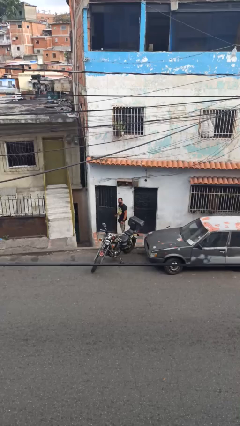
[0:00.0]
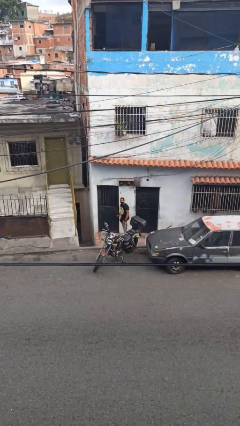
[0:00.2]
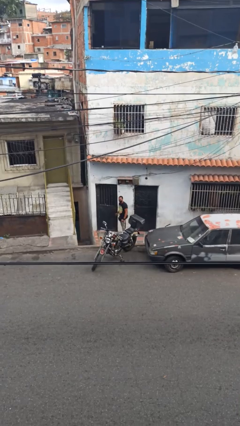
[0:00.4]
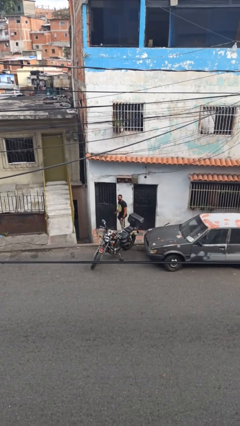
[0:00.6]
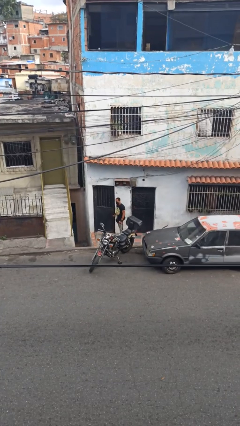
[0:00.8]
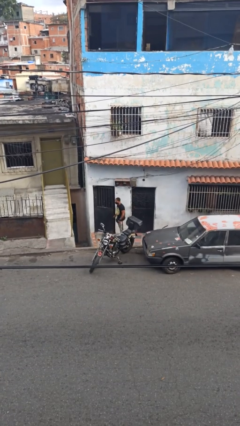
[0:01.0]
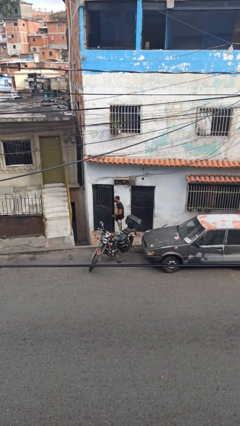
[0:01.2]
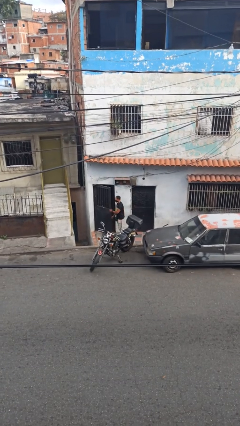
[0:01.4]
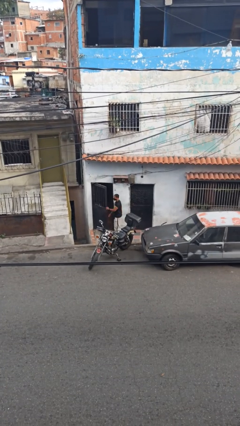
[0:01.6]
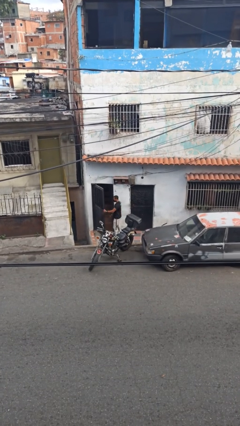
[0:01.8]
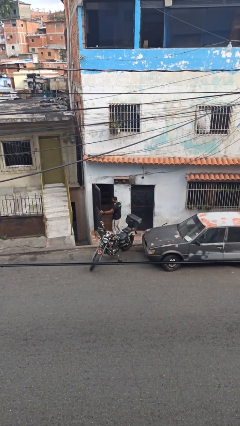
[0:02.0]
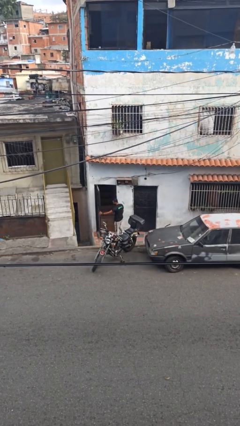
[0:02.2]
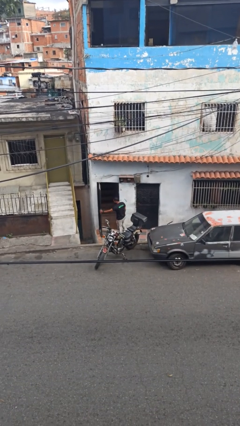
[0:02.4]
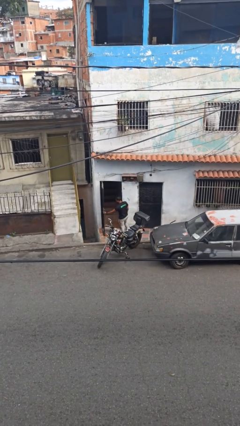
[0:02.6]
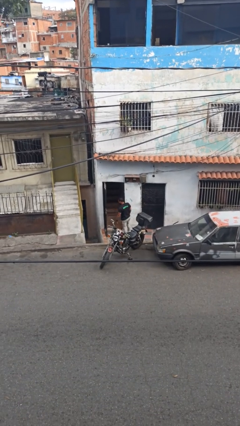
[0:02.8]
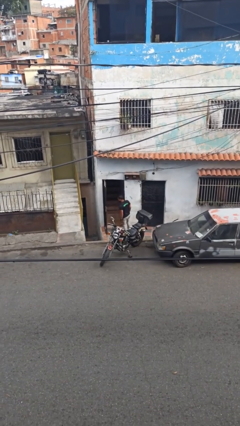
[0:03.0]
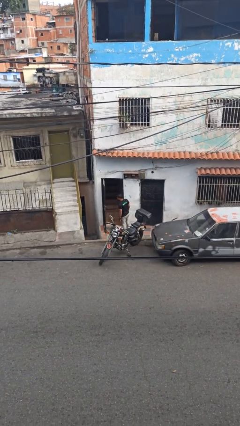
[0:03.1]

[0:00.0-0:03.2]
person opens facility door

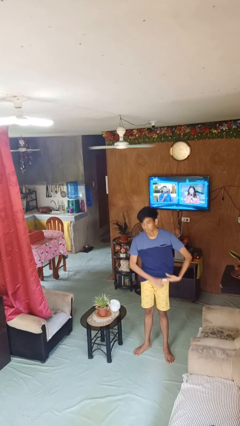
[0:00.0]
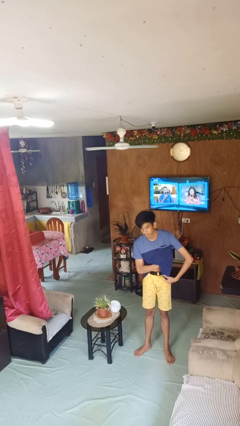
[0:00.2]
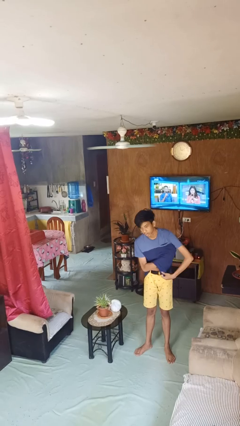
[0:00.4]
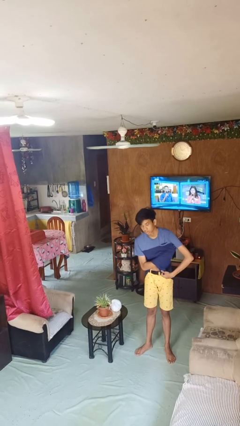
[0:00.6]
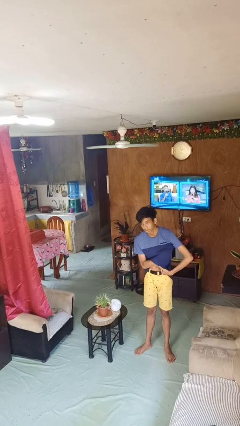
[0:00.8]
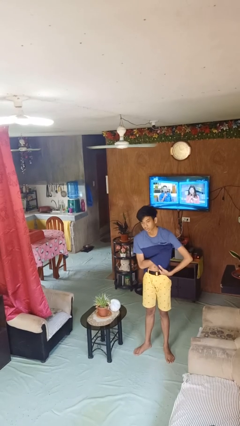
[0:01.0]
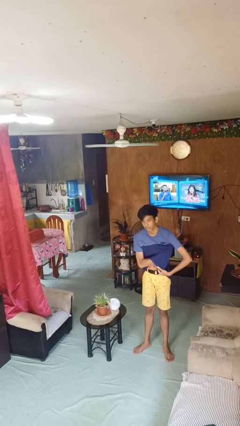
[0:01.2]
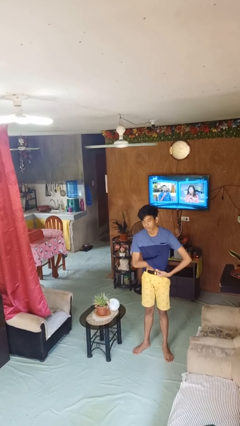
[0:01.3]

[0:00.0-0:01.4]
person applies deodorant

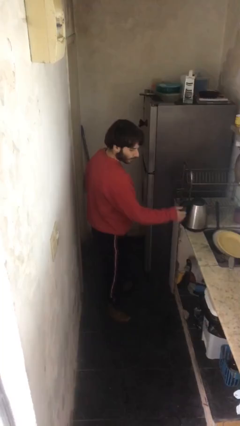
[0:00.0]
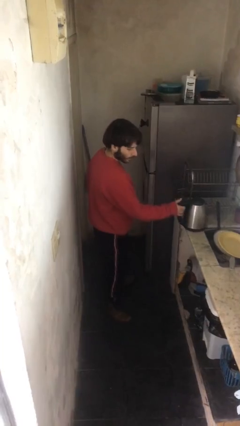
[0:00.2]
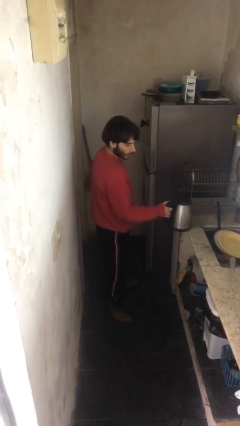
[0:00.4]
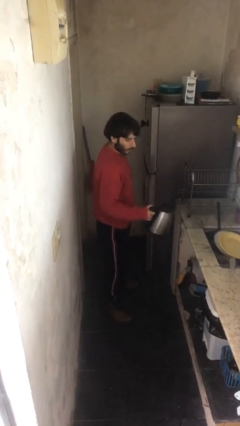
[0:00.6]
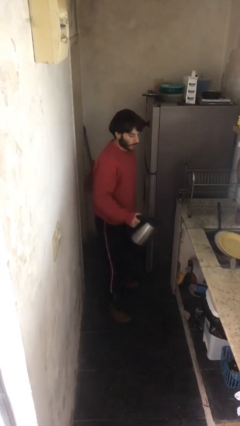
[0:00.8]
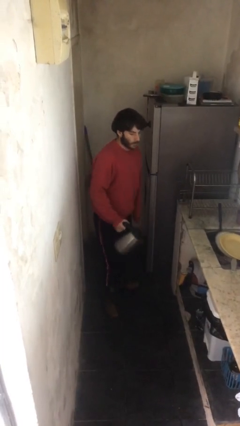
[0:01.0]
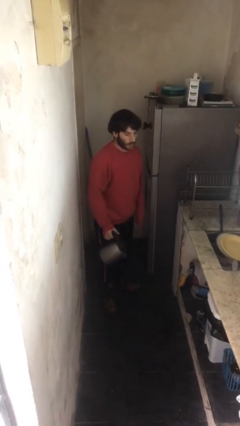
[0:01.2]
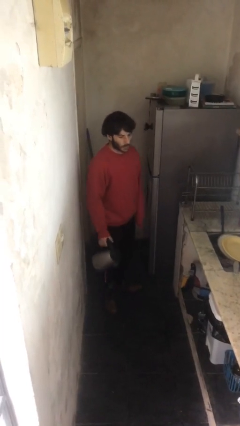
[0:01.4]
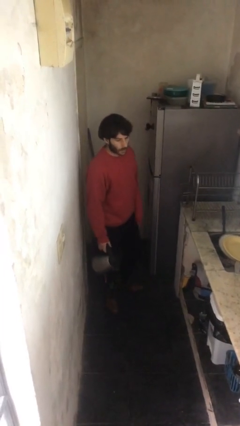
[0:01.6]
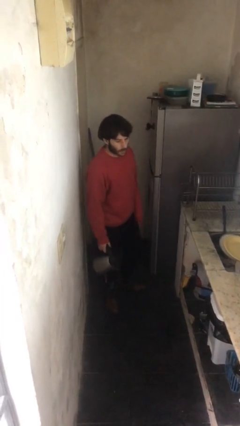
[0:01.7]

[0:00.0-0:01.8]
person picks up object from countertop

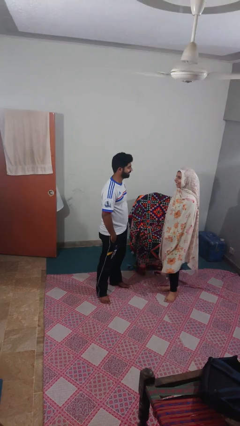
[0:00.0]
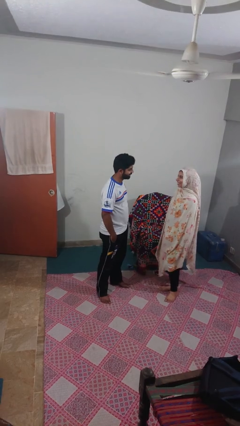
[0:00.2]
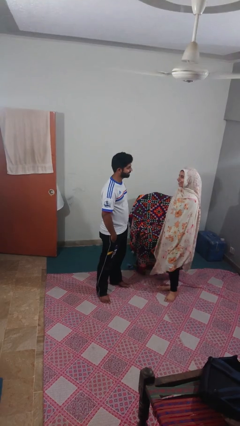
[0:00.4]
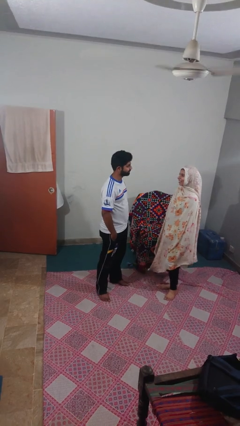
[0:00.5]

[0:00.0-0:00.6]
person laughs with person

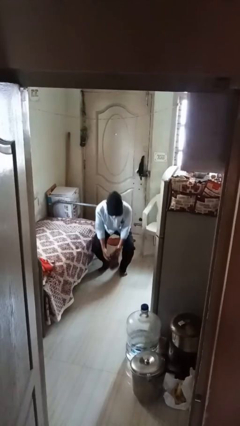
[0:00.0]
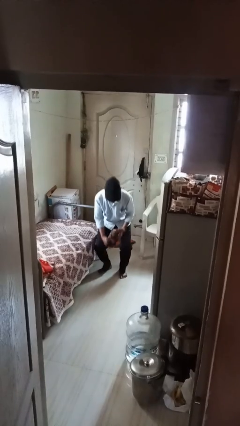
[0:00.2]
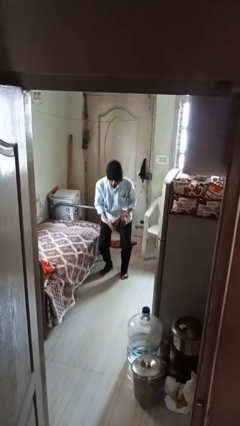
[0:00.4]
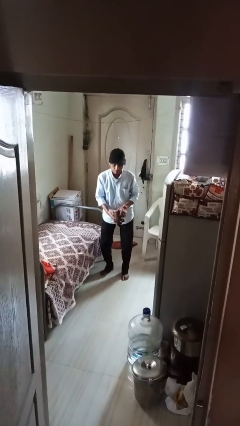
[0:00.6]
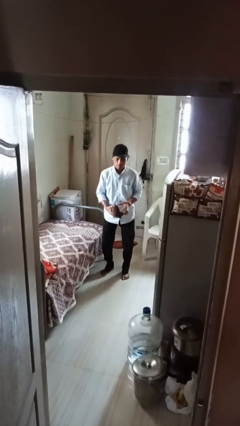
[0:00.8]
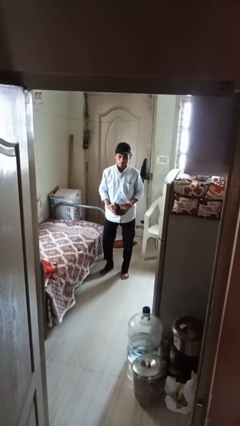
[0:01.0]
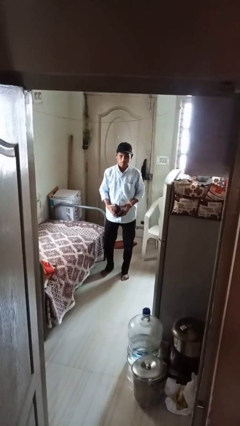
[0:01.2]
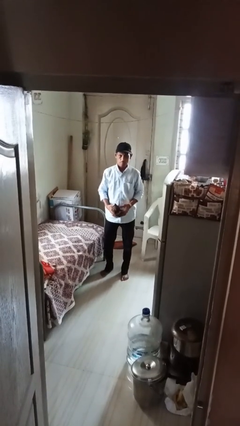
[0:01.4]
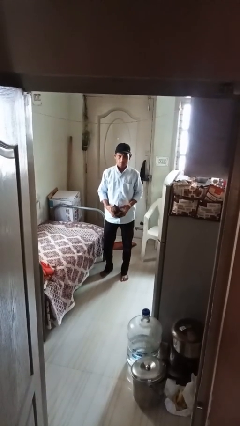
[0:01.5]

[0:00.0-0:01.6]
person catches dropped object

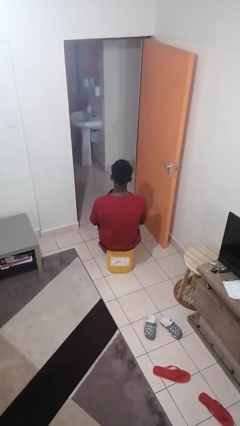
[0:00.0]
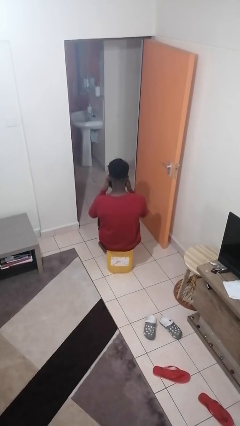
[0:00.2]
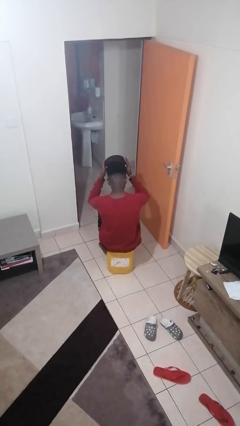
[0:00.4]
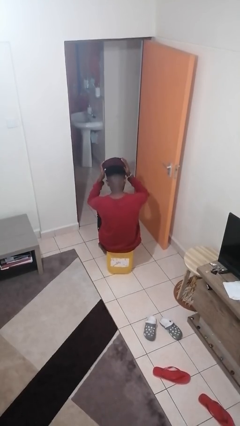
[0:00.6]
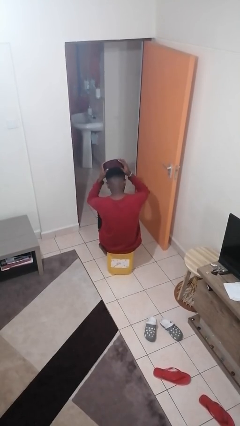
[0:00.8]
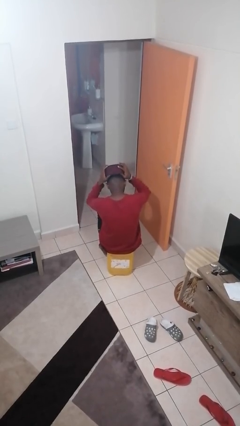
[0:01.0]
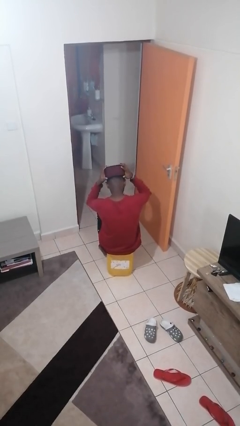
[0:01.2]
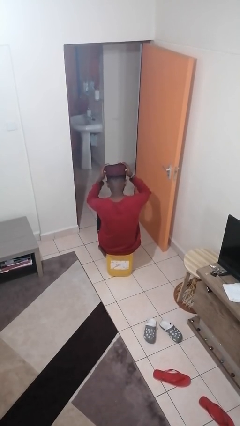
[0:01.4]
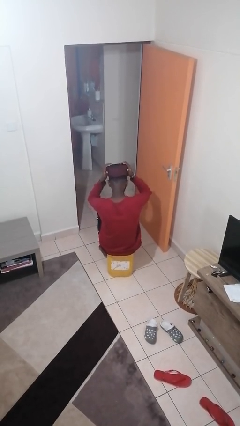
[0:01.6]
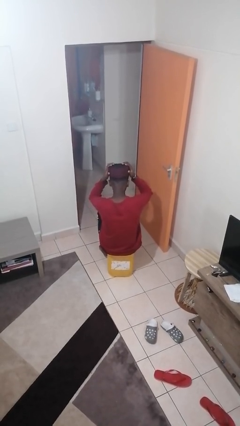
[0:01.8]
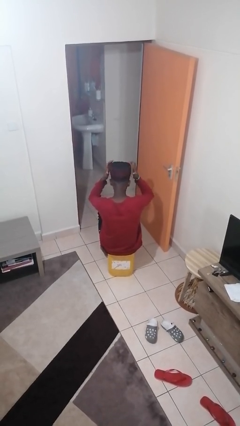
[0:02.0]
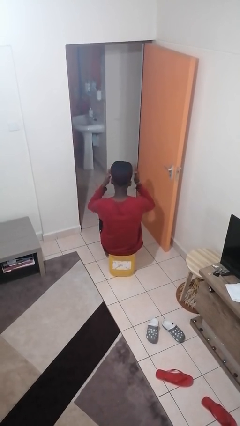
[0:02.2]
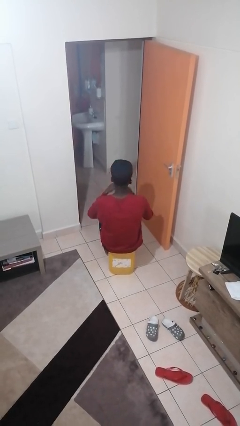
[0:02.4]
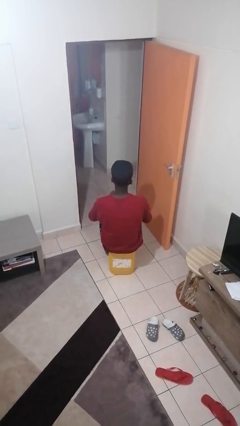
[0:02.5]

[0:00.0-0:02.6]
person puts on hat

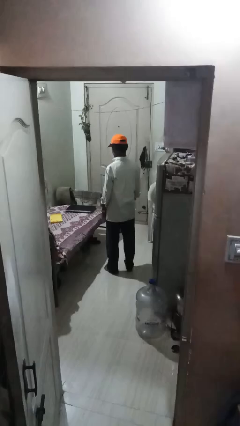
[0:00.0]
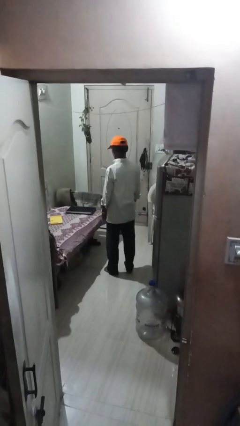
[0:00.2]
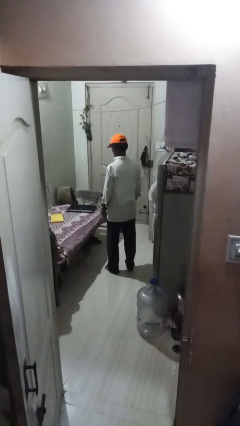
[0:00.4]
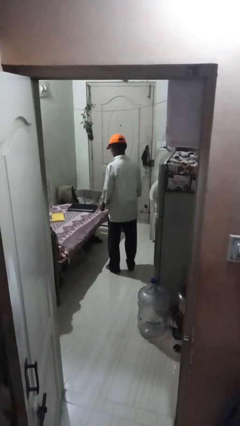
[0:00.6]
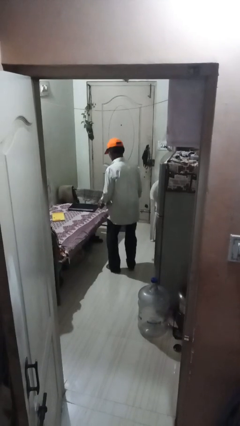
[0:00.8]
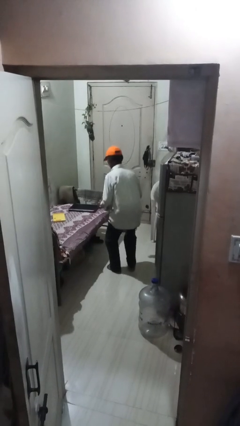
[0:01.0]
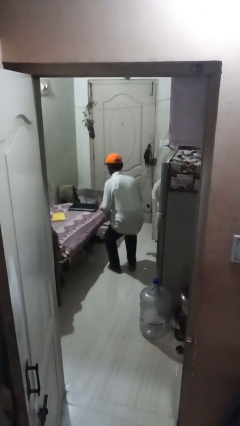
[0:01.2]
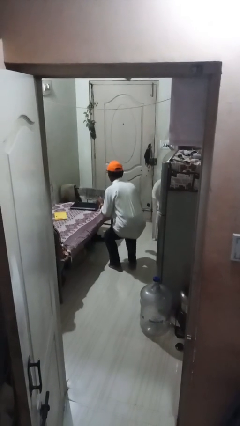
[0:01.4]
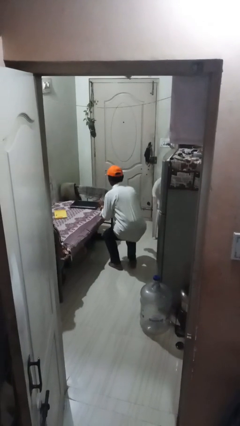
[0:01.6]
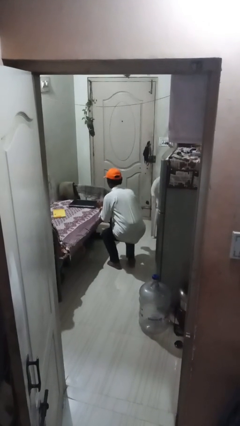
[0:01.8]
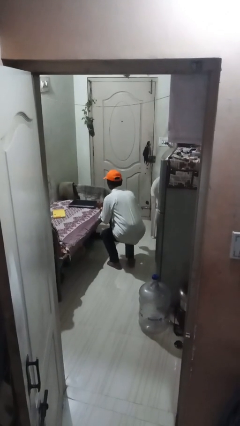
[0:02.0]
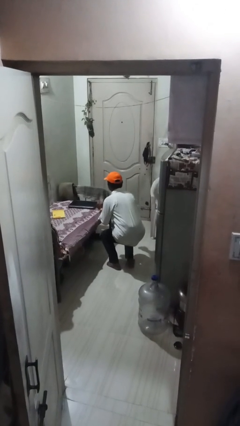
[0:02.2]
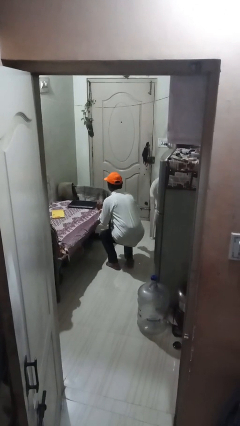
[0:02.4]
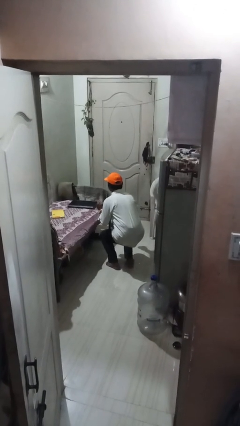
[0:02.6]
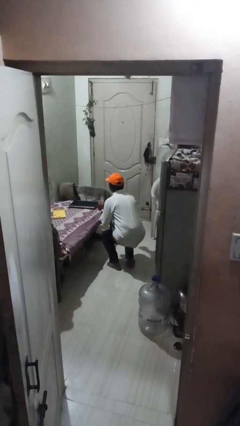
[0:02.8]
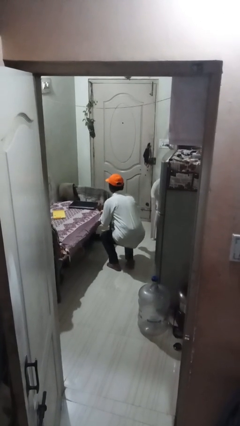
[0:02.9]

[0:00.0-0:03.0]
person squats

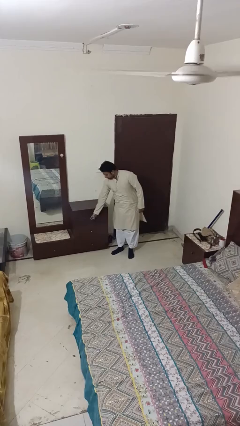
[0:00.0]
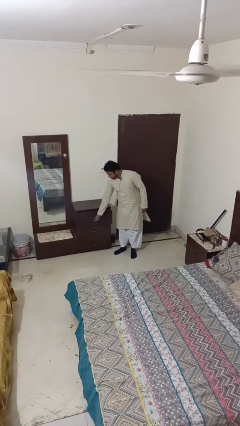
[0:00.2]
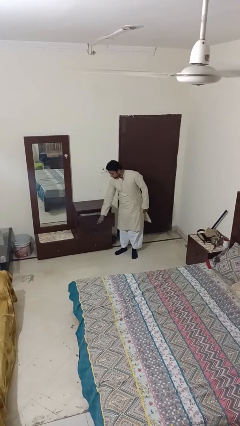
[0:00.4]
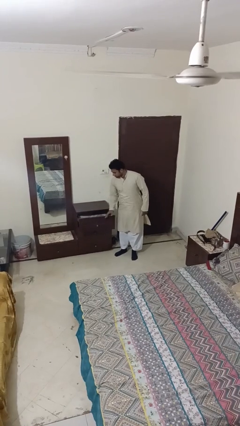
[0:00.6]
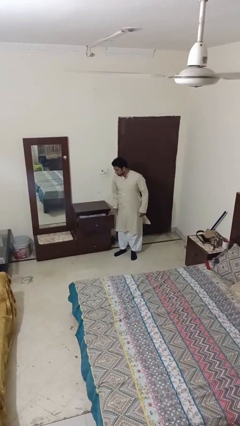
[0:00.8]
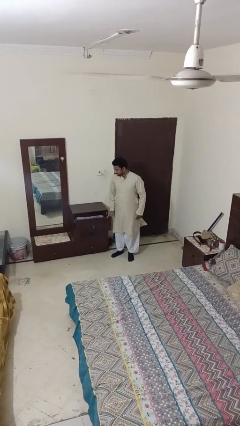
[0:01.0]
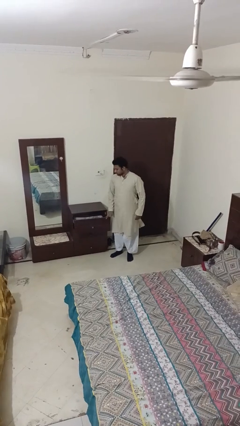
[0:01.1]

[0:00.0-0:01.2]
person opens dresser drawer

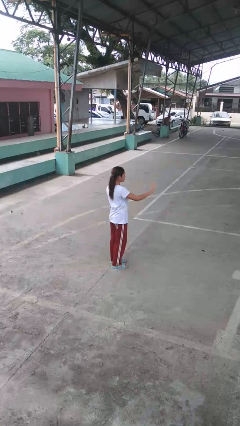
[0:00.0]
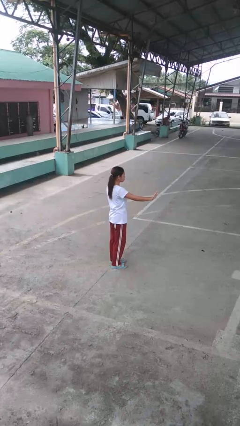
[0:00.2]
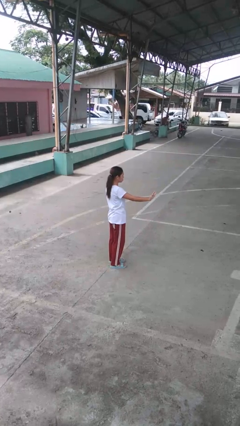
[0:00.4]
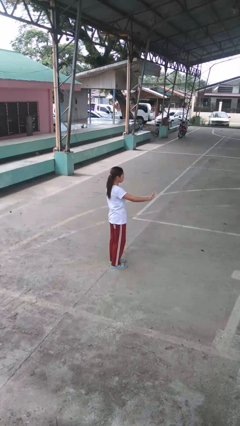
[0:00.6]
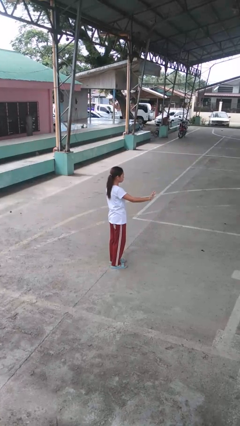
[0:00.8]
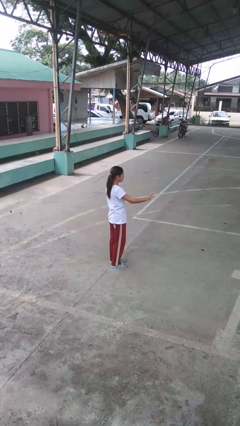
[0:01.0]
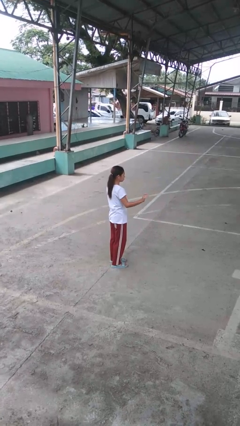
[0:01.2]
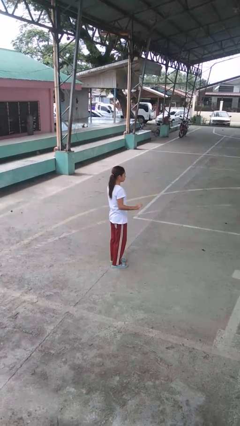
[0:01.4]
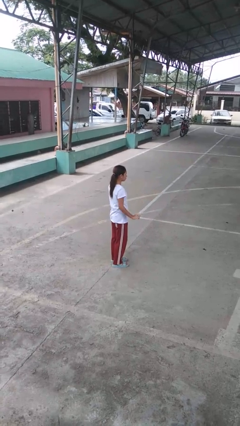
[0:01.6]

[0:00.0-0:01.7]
person gestures swipe right
